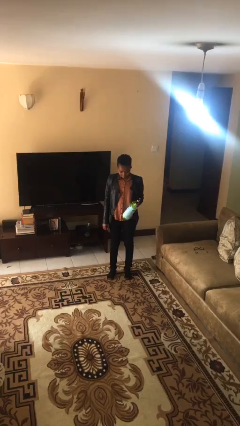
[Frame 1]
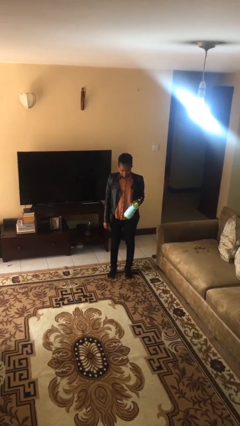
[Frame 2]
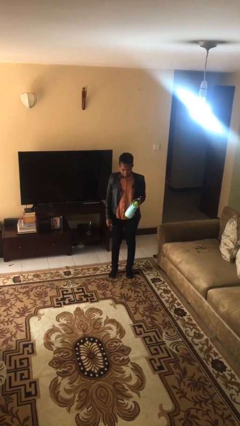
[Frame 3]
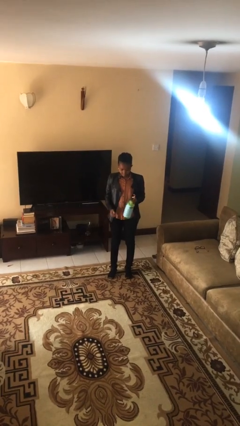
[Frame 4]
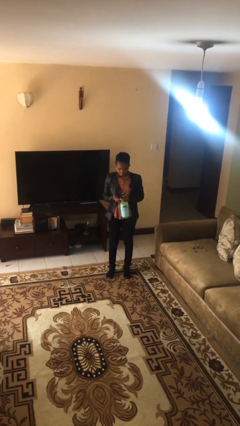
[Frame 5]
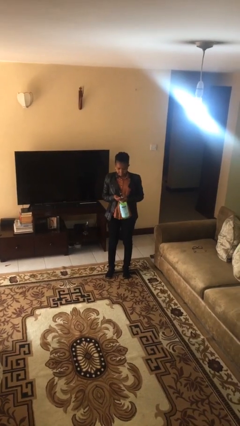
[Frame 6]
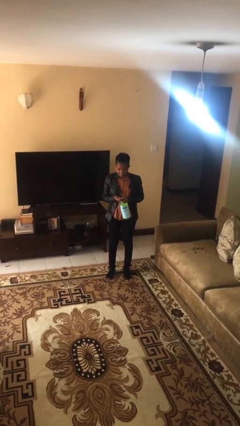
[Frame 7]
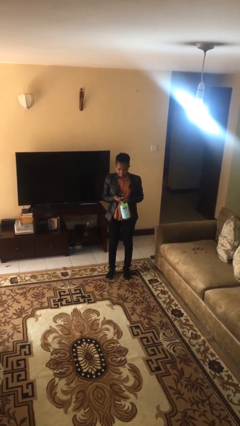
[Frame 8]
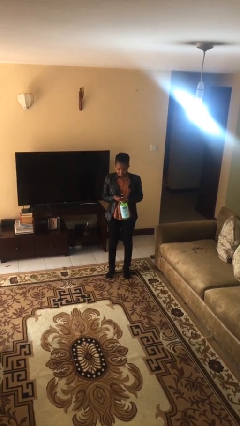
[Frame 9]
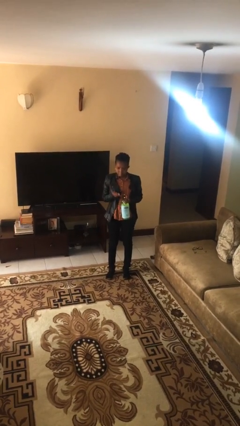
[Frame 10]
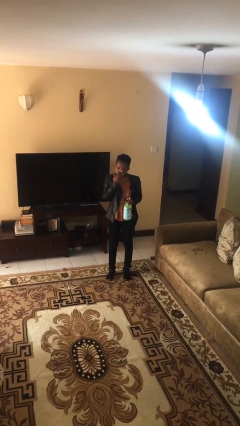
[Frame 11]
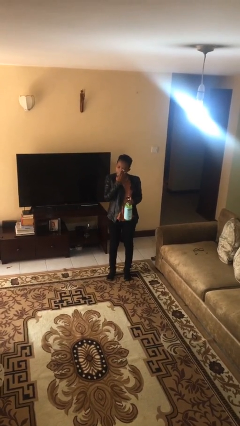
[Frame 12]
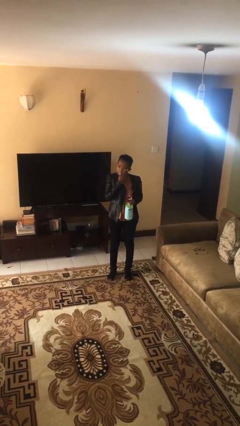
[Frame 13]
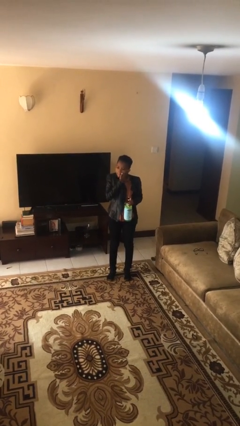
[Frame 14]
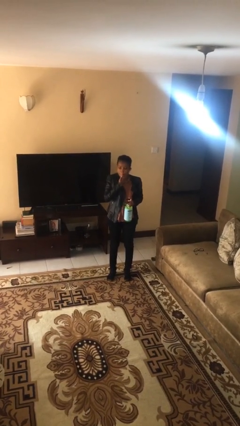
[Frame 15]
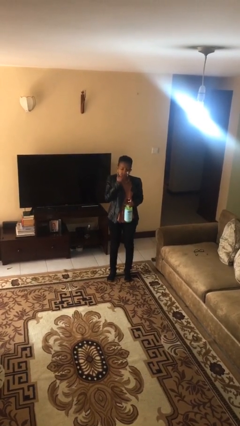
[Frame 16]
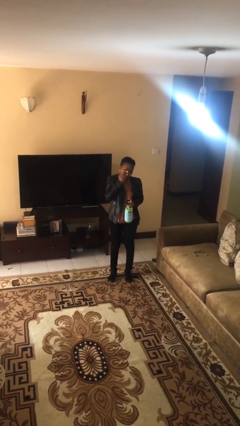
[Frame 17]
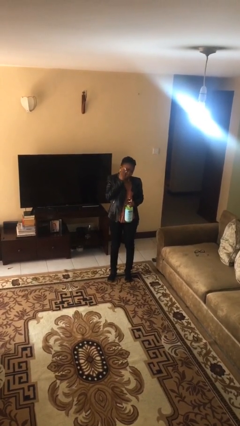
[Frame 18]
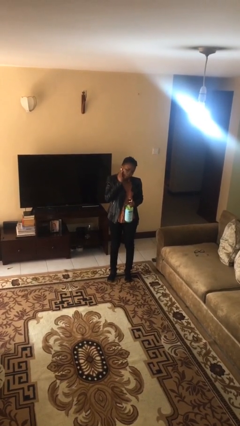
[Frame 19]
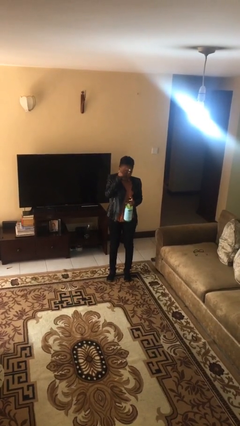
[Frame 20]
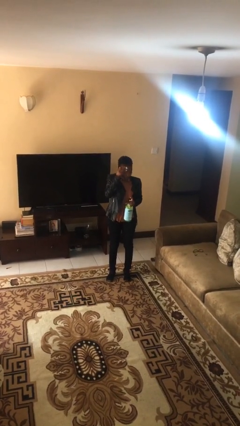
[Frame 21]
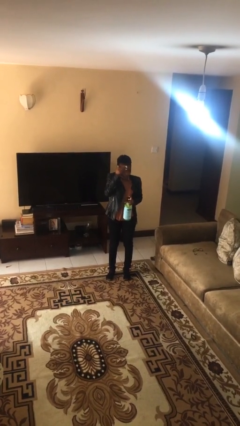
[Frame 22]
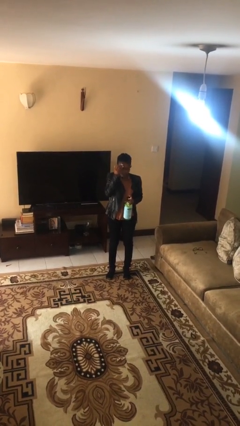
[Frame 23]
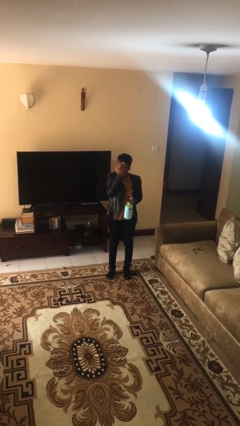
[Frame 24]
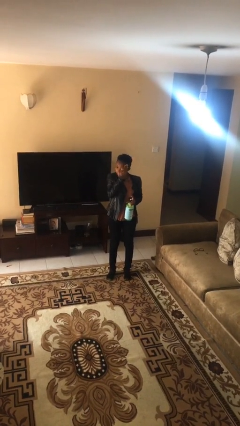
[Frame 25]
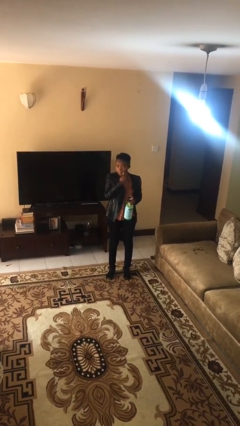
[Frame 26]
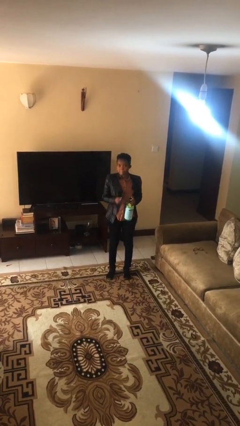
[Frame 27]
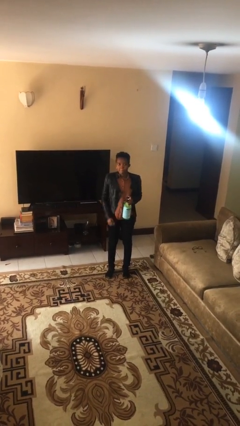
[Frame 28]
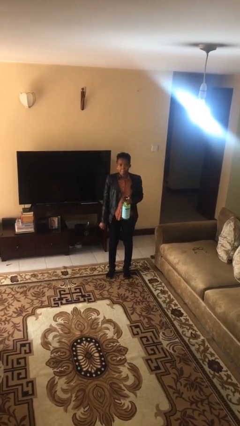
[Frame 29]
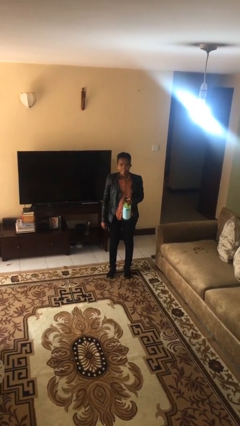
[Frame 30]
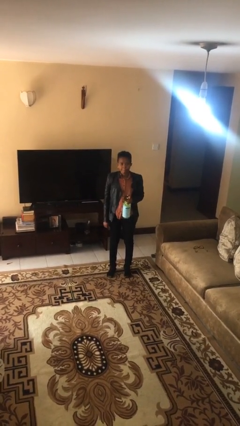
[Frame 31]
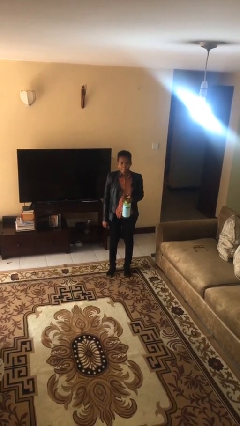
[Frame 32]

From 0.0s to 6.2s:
person applies facial moisturizer

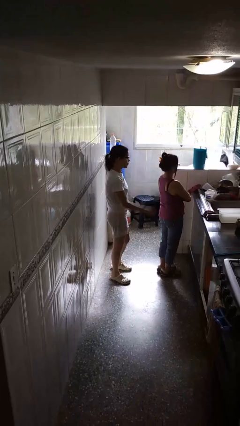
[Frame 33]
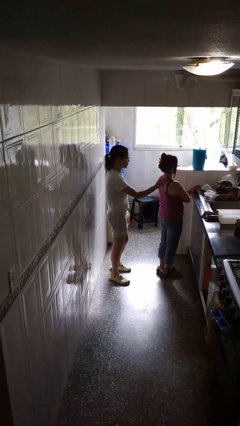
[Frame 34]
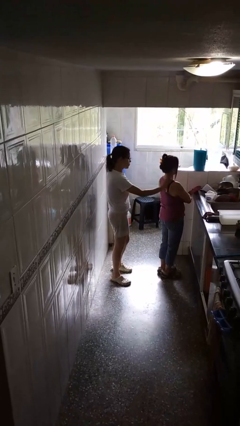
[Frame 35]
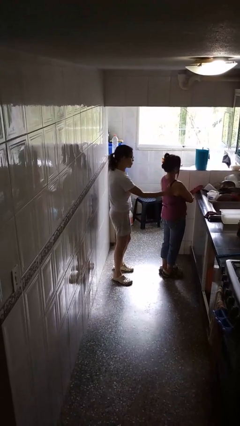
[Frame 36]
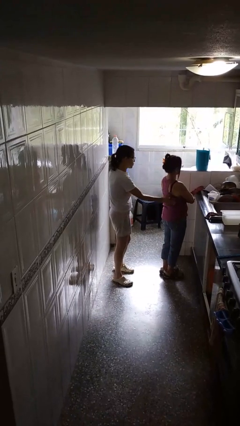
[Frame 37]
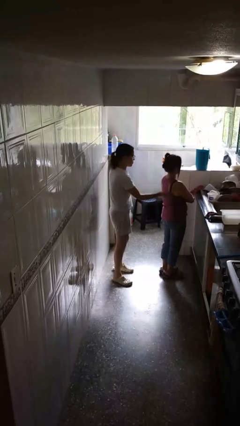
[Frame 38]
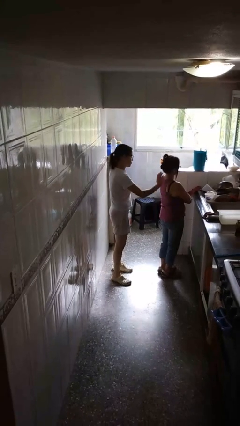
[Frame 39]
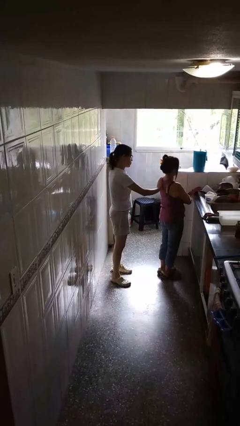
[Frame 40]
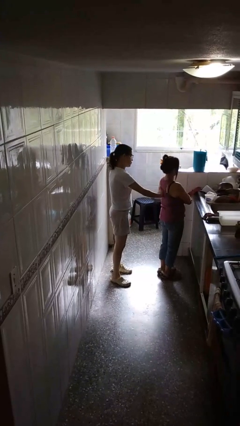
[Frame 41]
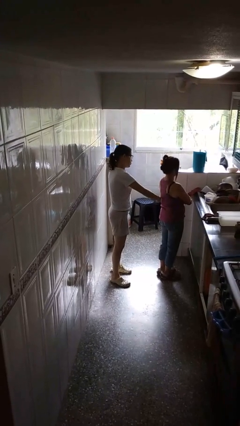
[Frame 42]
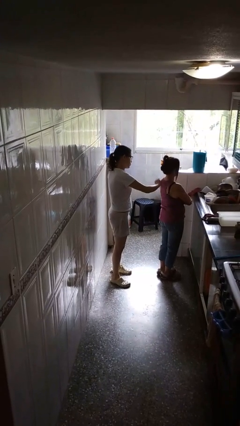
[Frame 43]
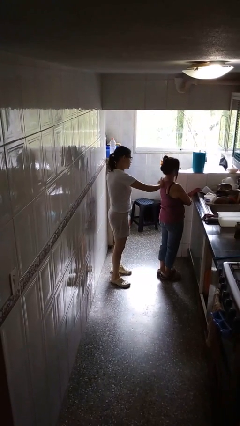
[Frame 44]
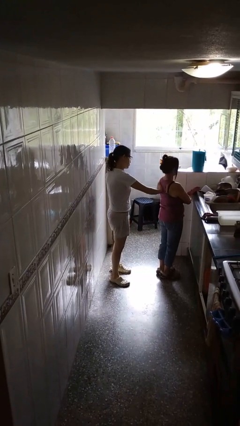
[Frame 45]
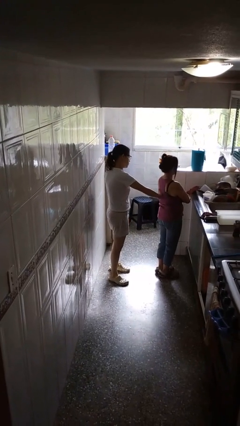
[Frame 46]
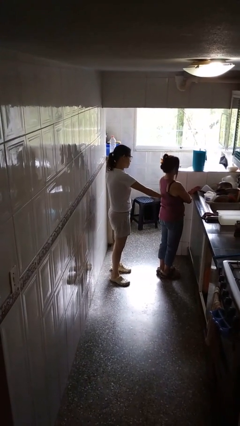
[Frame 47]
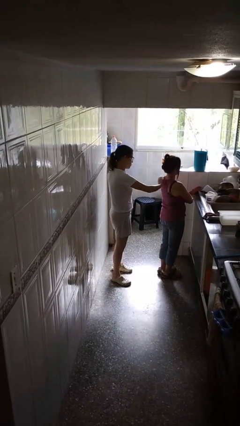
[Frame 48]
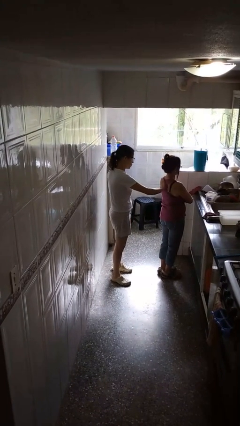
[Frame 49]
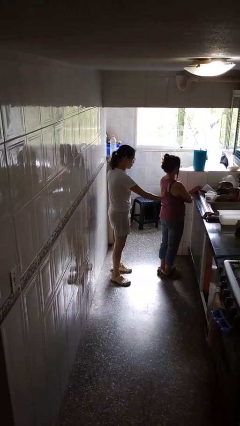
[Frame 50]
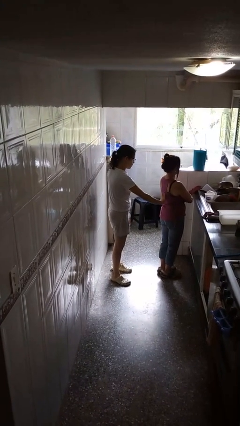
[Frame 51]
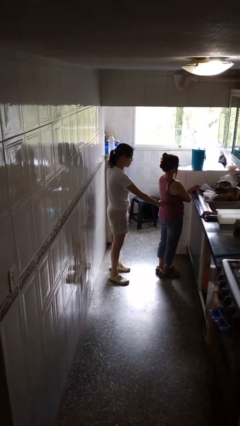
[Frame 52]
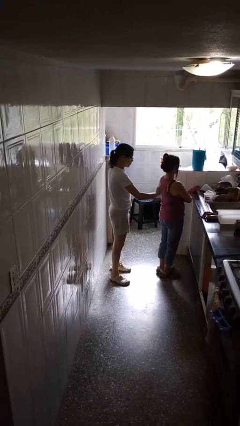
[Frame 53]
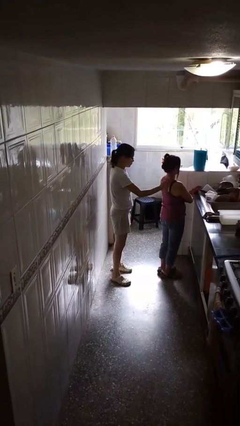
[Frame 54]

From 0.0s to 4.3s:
person touches back of person

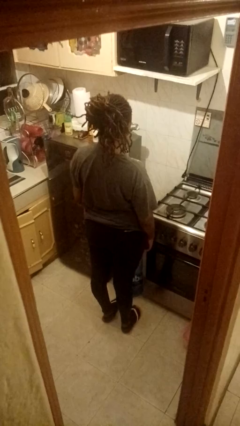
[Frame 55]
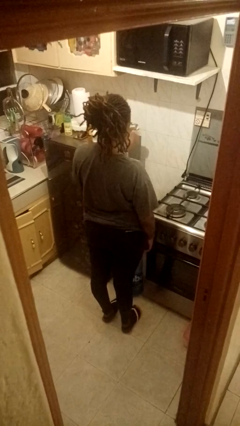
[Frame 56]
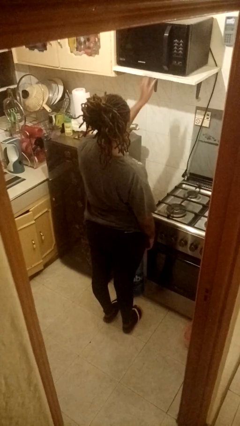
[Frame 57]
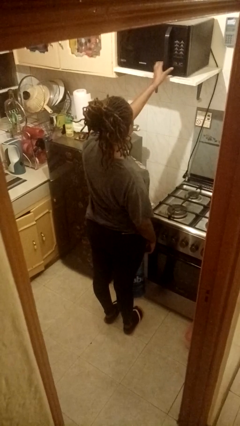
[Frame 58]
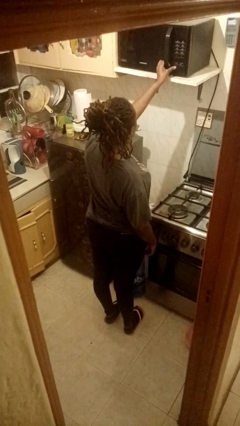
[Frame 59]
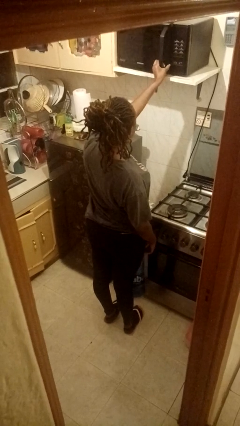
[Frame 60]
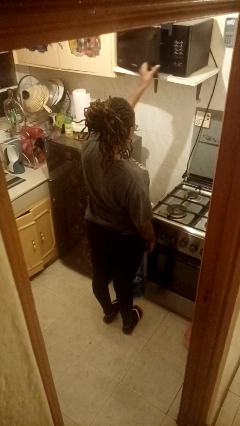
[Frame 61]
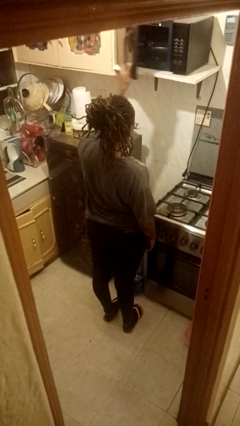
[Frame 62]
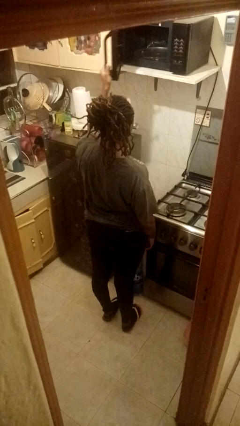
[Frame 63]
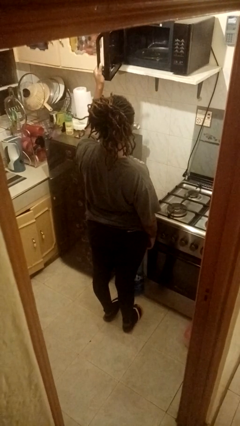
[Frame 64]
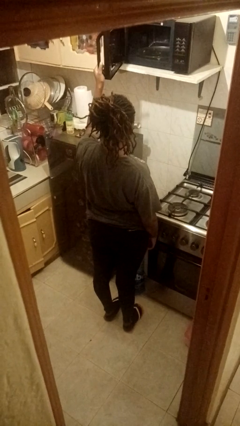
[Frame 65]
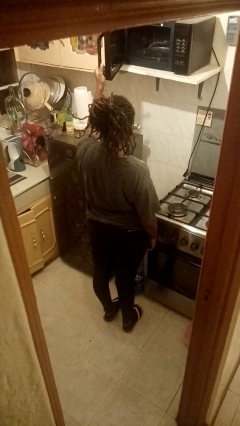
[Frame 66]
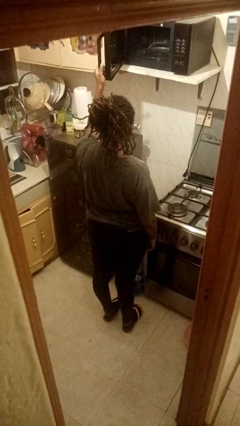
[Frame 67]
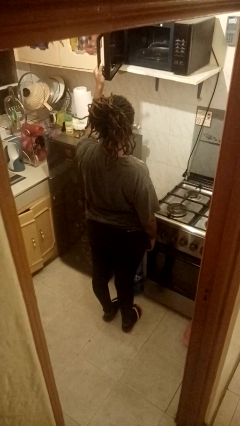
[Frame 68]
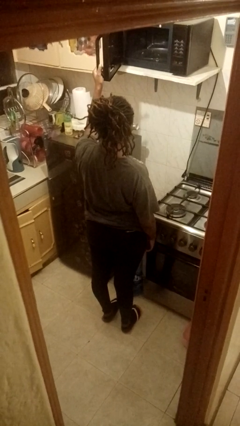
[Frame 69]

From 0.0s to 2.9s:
person opens microwave

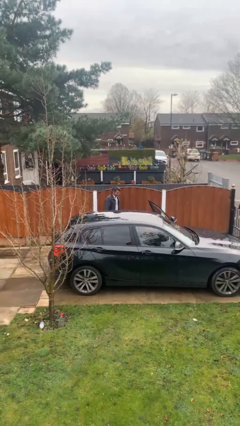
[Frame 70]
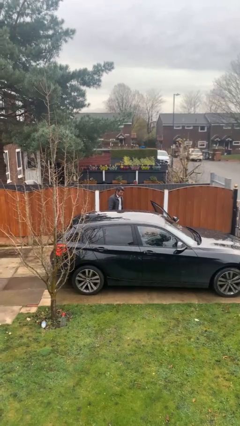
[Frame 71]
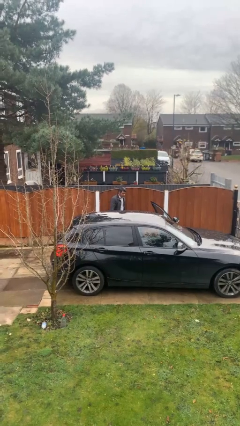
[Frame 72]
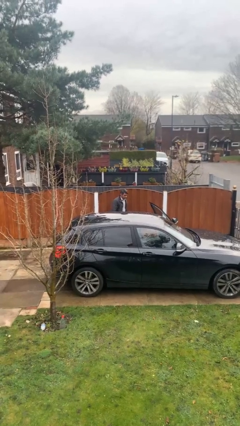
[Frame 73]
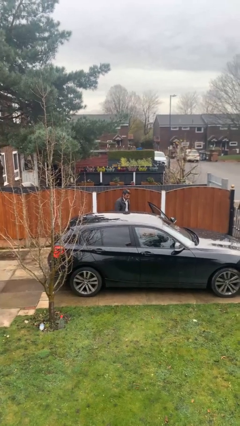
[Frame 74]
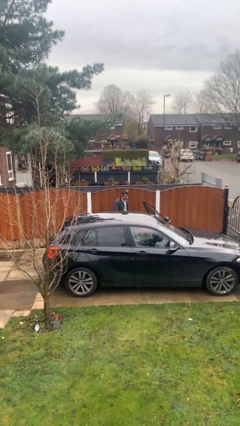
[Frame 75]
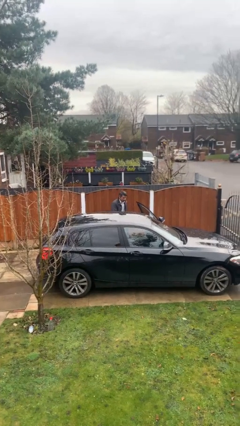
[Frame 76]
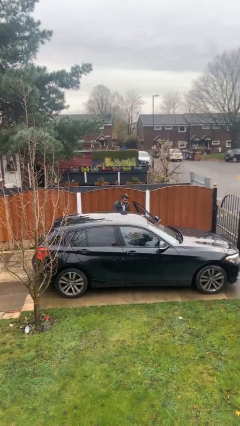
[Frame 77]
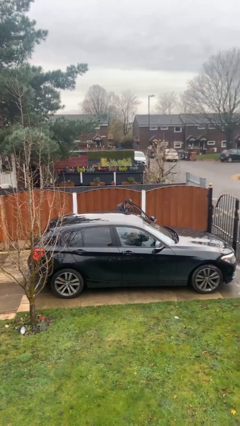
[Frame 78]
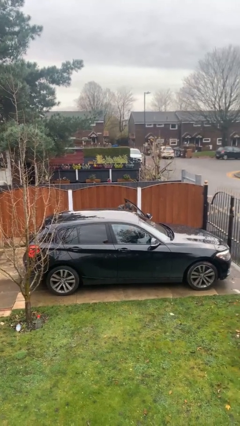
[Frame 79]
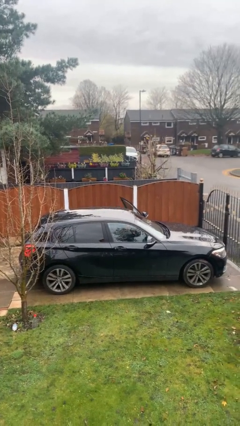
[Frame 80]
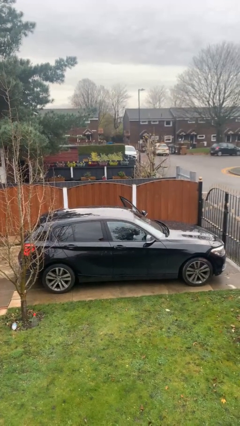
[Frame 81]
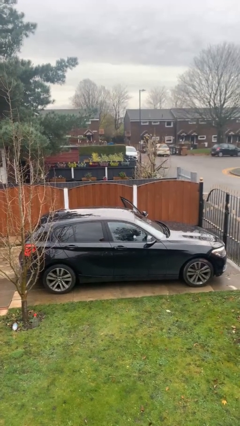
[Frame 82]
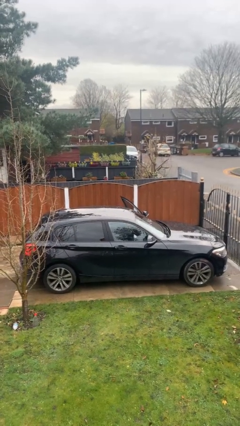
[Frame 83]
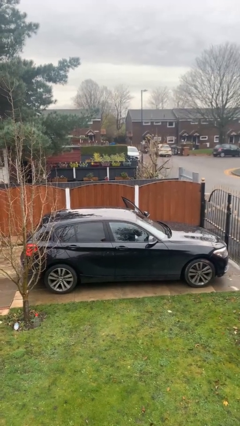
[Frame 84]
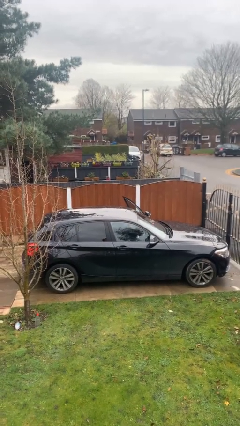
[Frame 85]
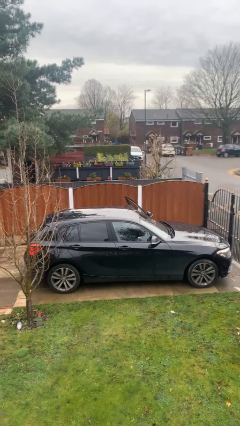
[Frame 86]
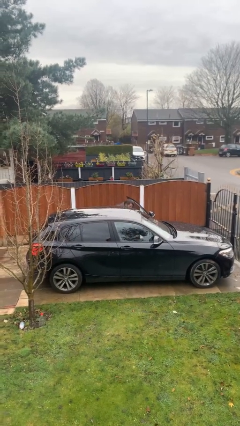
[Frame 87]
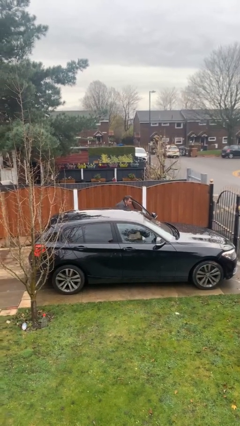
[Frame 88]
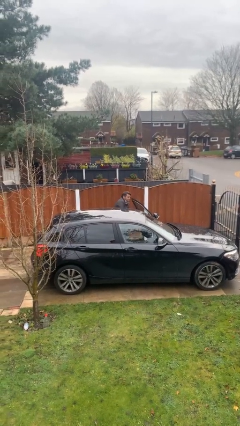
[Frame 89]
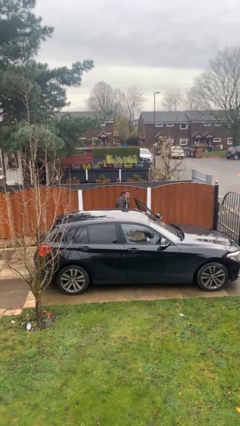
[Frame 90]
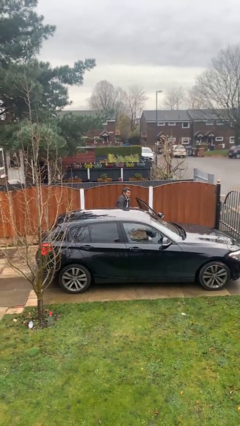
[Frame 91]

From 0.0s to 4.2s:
person unloads car

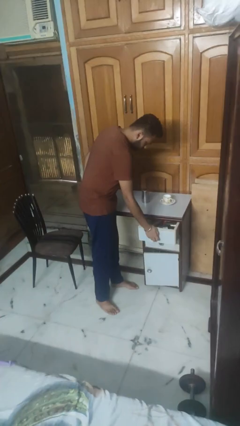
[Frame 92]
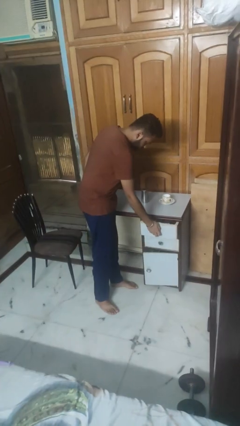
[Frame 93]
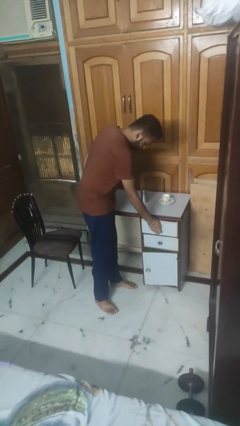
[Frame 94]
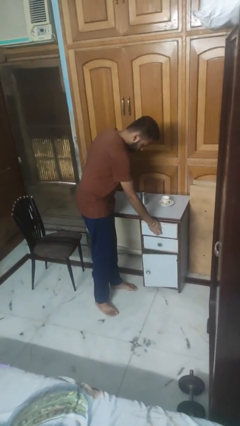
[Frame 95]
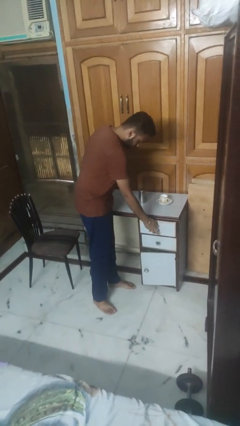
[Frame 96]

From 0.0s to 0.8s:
person closes kitchen drawer
